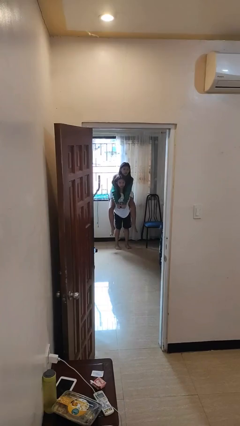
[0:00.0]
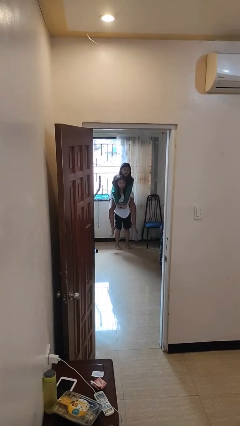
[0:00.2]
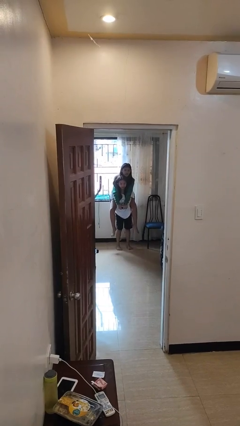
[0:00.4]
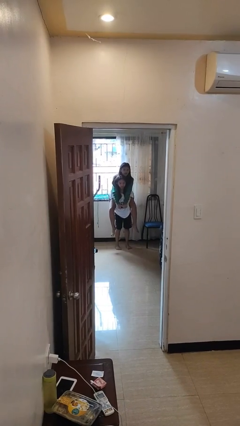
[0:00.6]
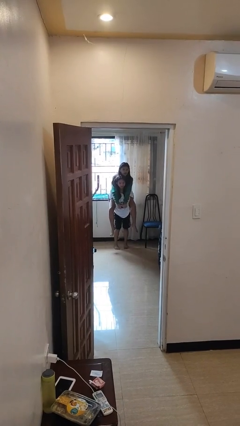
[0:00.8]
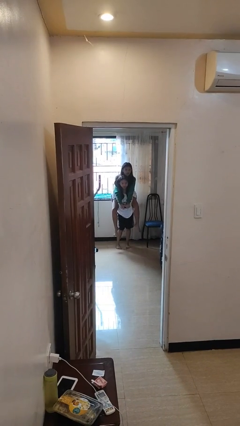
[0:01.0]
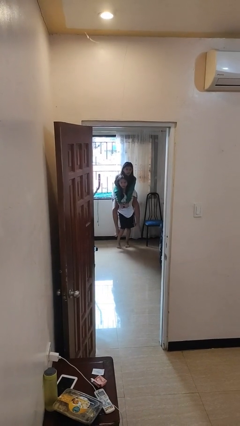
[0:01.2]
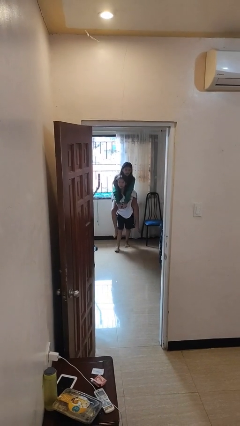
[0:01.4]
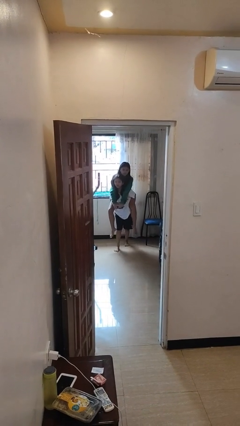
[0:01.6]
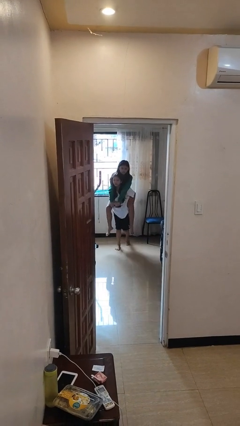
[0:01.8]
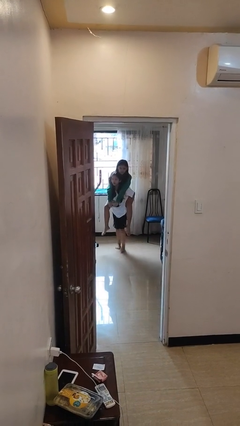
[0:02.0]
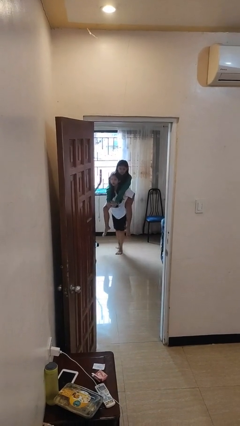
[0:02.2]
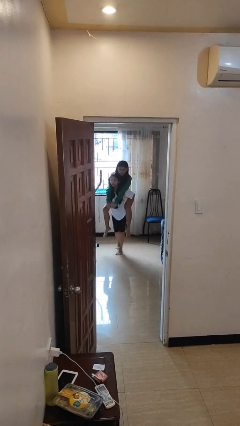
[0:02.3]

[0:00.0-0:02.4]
person carries person on back

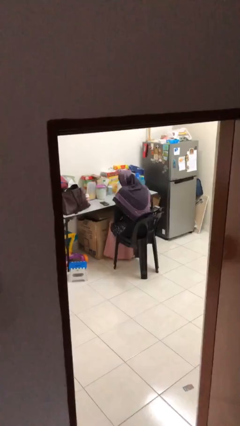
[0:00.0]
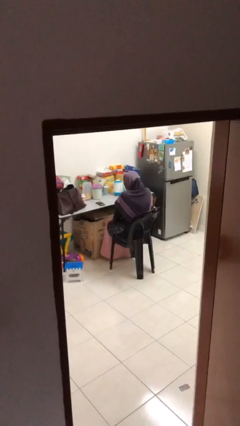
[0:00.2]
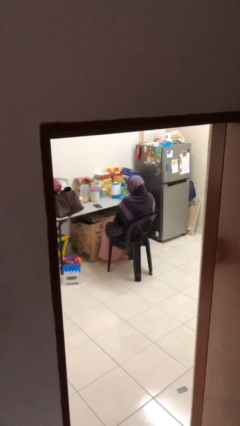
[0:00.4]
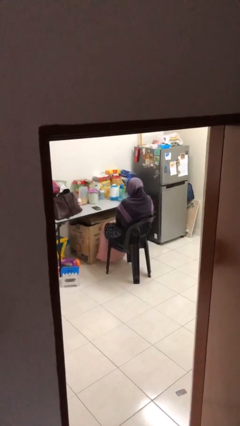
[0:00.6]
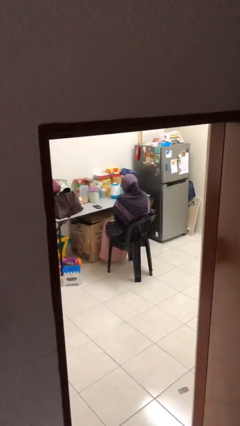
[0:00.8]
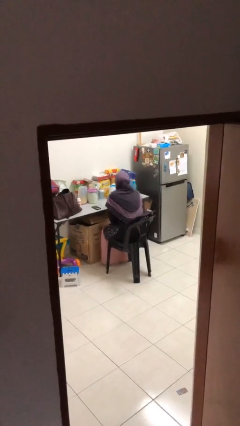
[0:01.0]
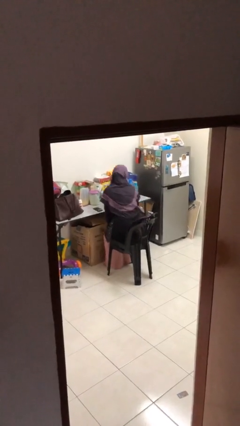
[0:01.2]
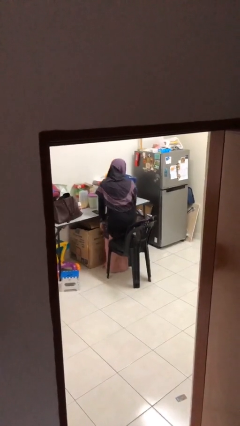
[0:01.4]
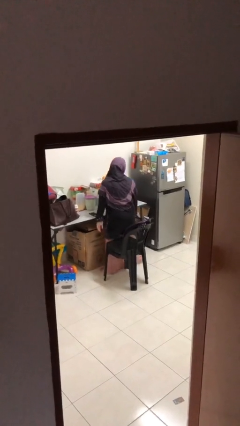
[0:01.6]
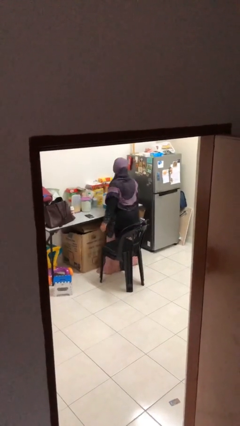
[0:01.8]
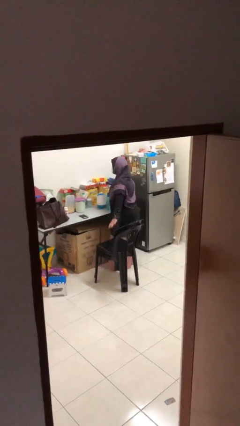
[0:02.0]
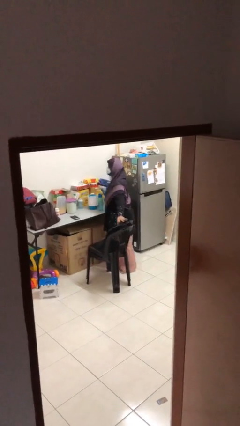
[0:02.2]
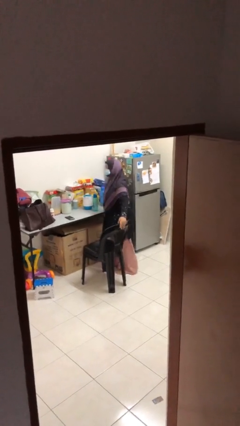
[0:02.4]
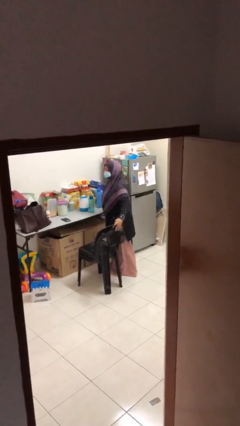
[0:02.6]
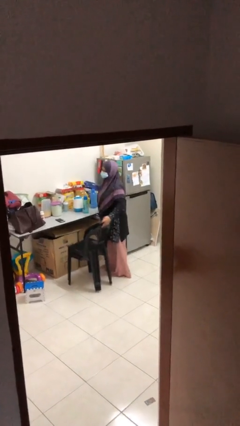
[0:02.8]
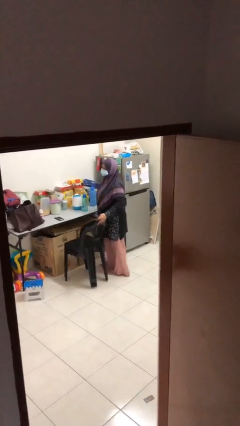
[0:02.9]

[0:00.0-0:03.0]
person stands up

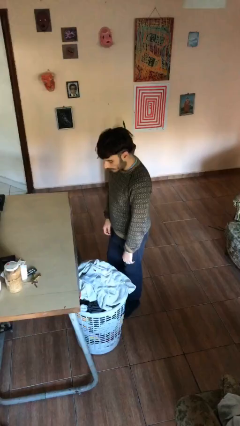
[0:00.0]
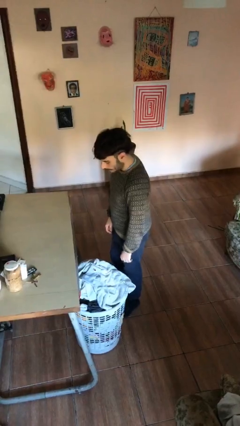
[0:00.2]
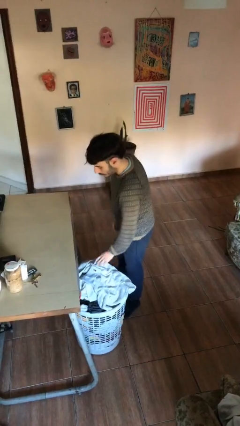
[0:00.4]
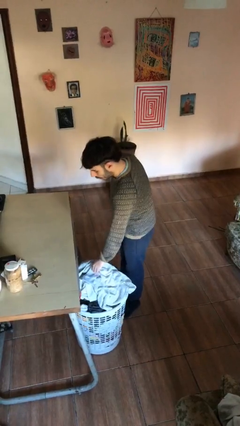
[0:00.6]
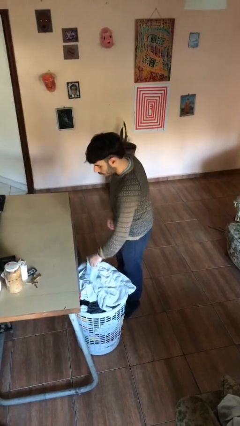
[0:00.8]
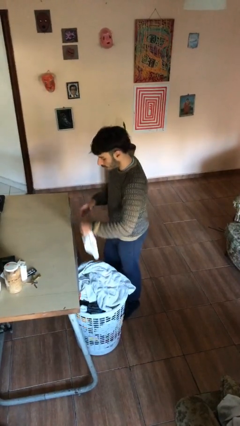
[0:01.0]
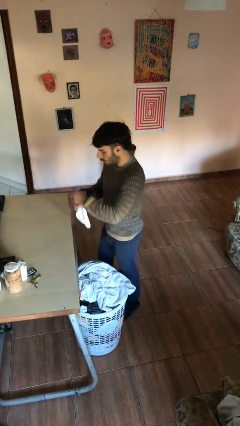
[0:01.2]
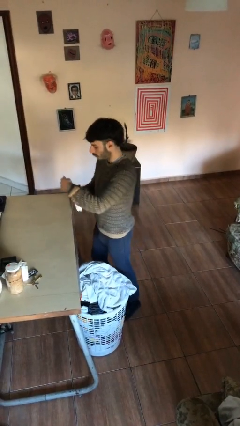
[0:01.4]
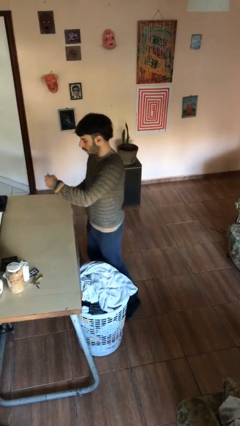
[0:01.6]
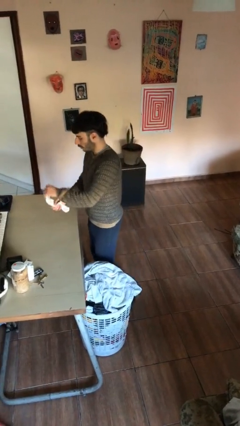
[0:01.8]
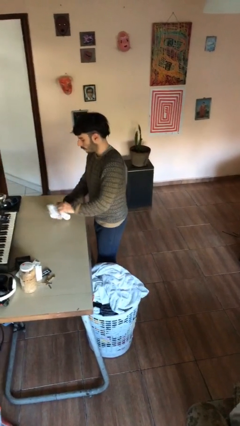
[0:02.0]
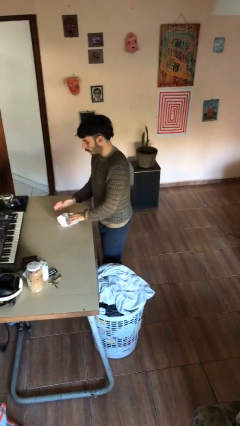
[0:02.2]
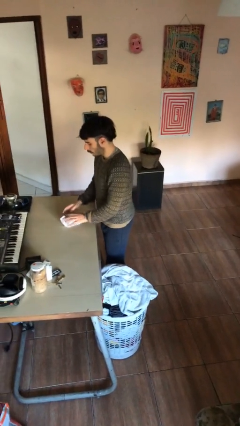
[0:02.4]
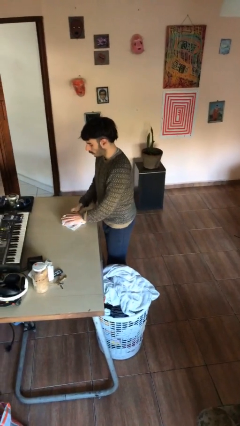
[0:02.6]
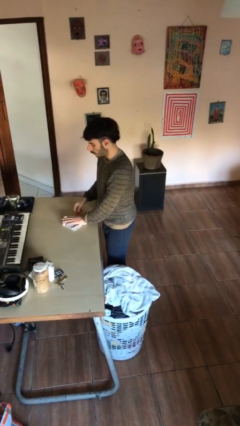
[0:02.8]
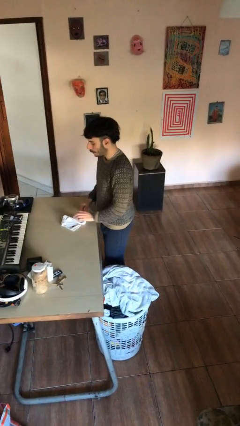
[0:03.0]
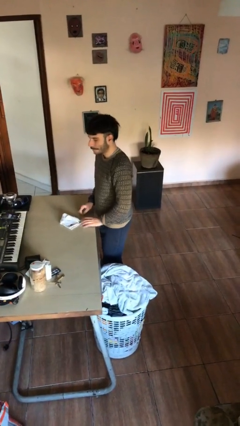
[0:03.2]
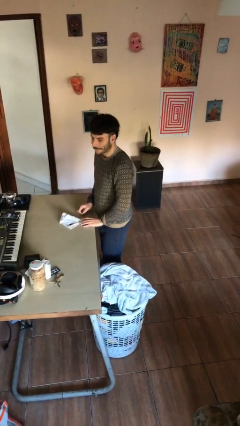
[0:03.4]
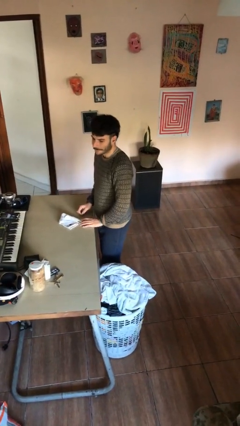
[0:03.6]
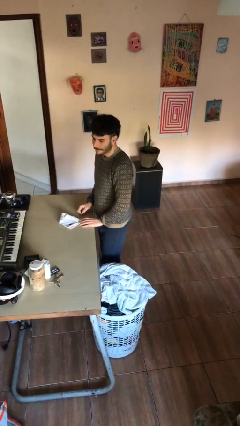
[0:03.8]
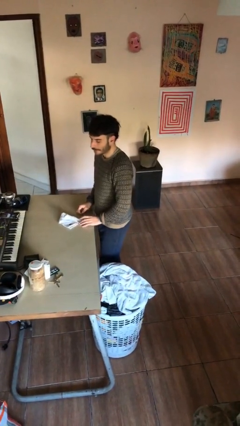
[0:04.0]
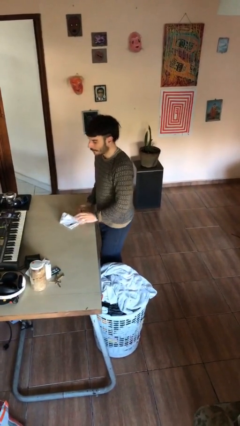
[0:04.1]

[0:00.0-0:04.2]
person folds socks

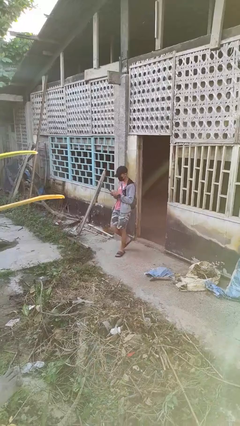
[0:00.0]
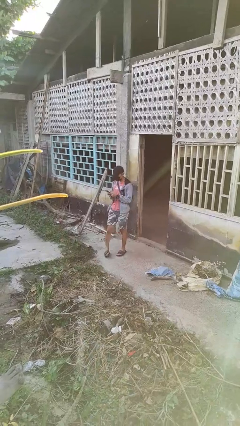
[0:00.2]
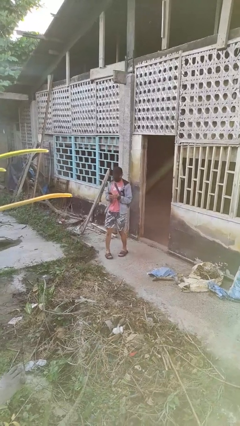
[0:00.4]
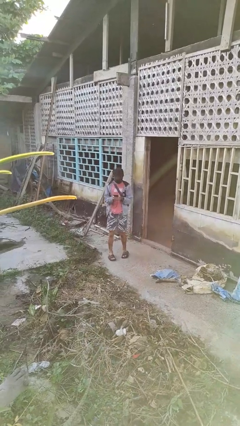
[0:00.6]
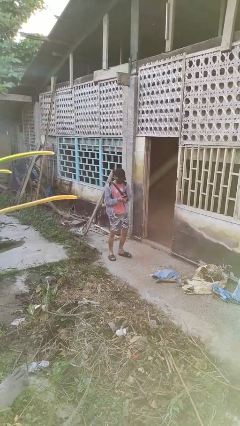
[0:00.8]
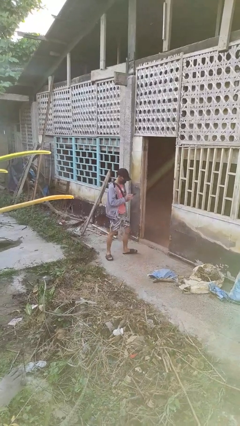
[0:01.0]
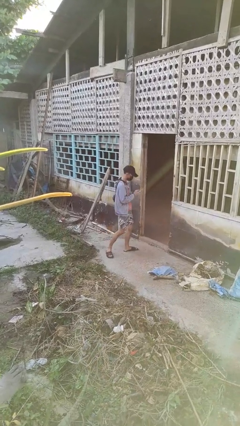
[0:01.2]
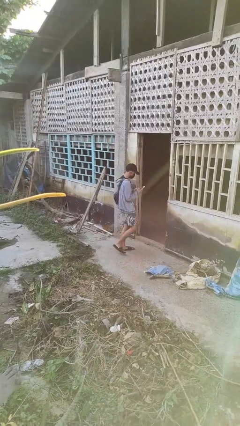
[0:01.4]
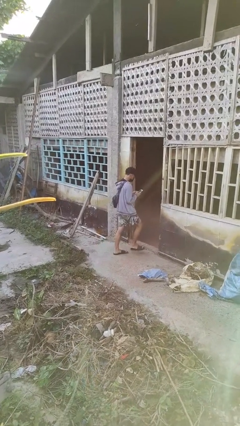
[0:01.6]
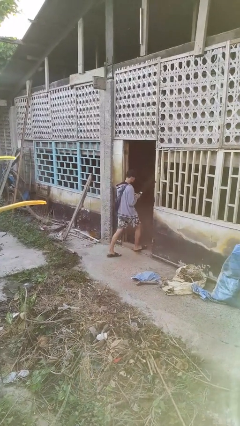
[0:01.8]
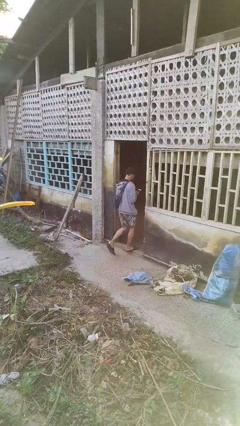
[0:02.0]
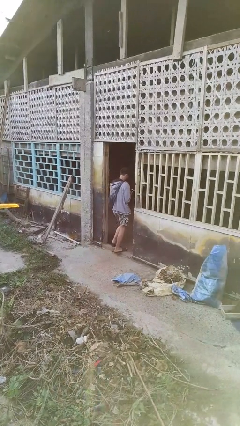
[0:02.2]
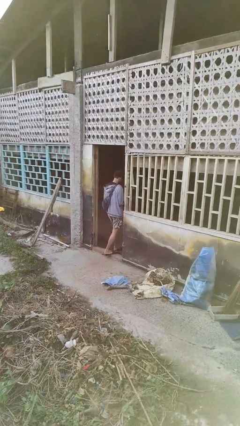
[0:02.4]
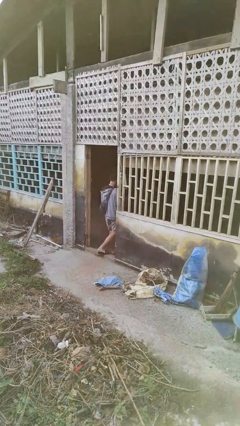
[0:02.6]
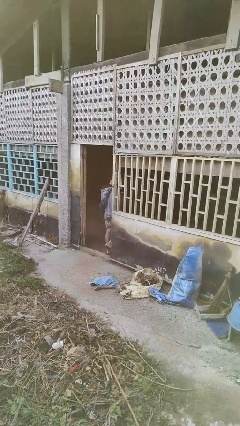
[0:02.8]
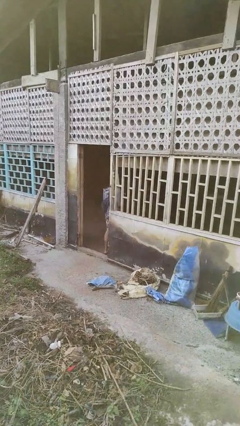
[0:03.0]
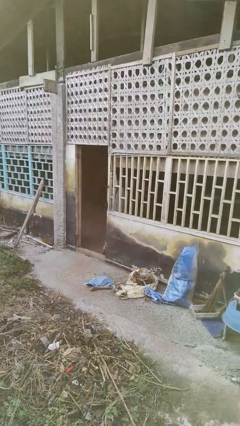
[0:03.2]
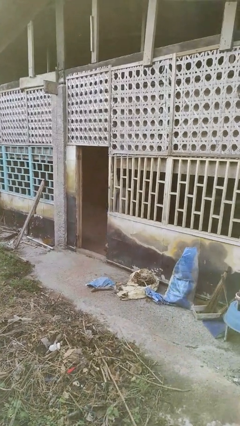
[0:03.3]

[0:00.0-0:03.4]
person exits scene through structure

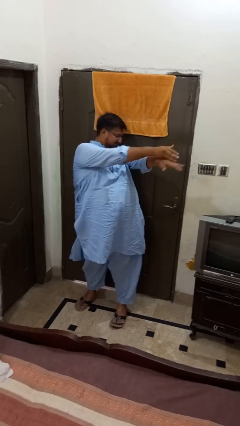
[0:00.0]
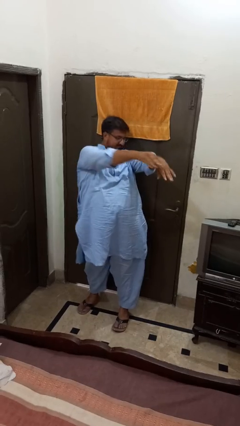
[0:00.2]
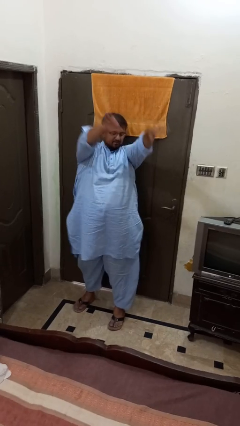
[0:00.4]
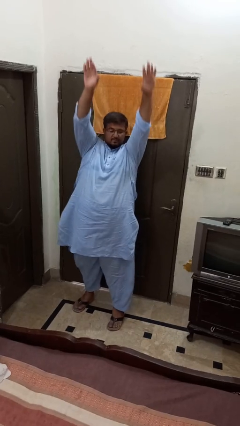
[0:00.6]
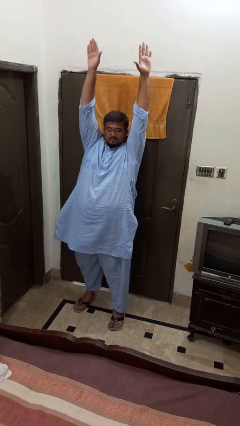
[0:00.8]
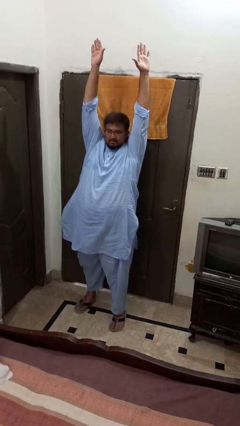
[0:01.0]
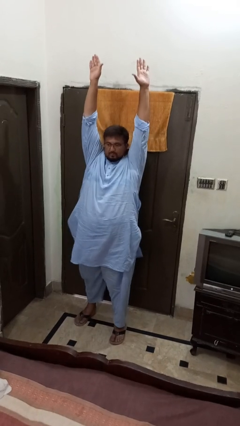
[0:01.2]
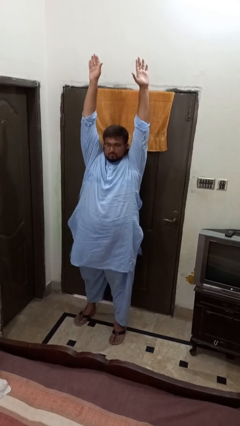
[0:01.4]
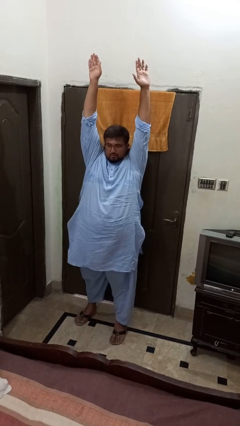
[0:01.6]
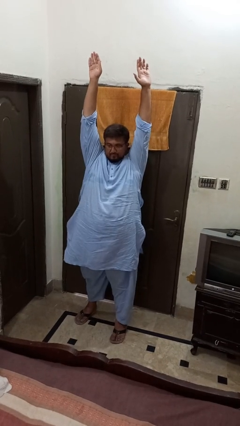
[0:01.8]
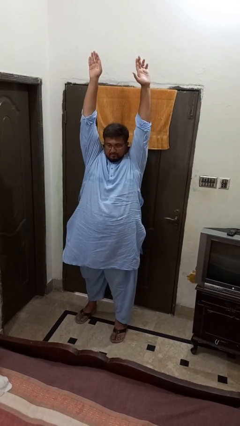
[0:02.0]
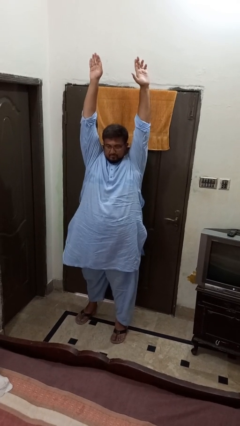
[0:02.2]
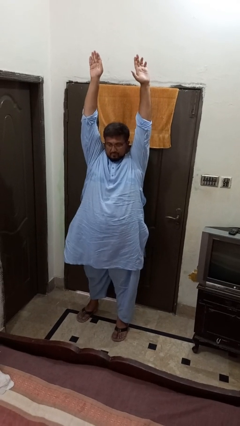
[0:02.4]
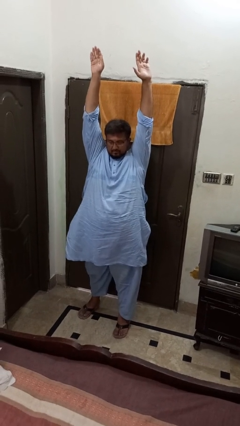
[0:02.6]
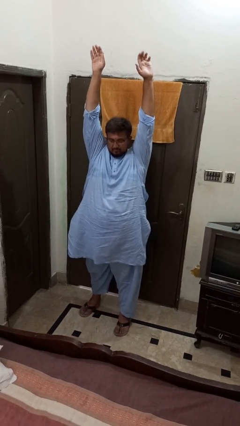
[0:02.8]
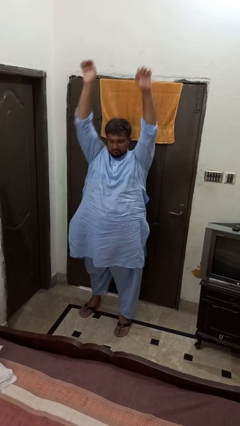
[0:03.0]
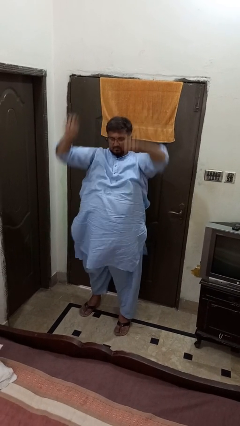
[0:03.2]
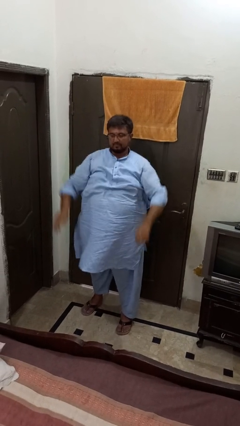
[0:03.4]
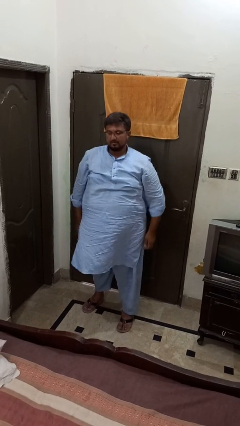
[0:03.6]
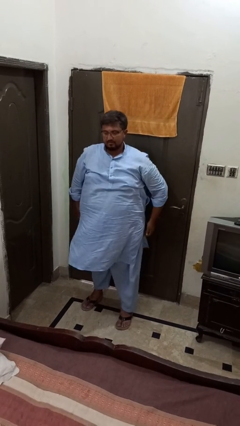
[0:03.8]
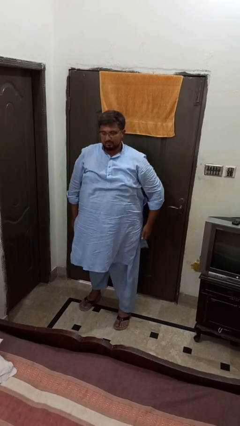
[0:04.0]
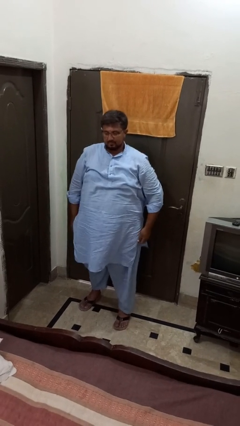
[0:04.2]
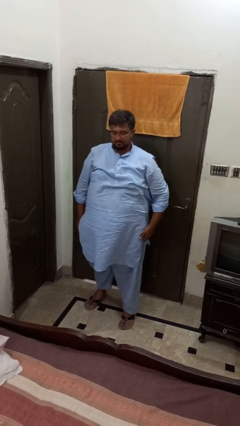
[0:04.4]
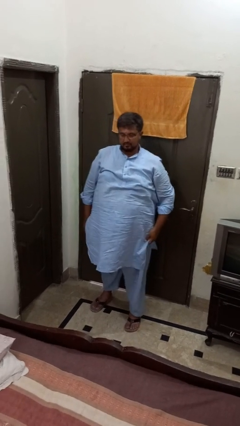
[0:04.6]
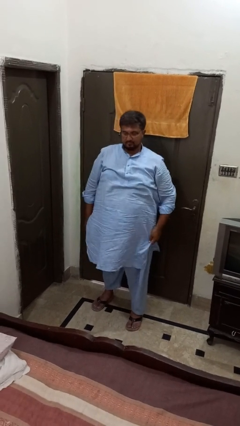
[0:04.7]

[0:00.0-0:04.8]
person stretches arms over head
